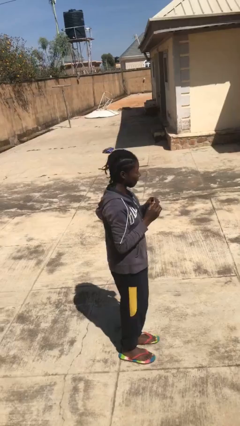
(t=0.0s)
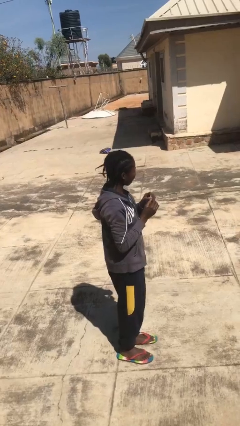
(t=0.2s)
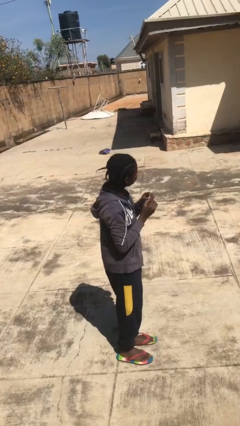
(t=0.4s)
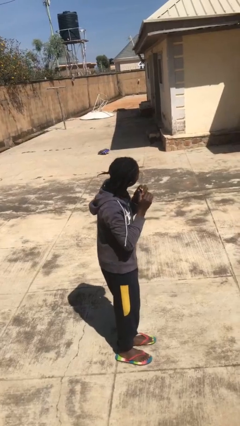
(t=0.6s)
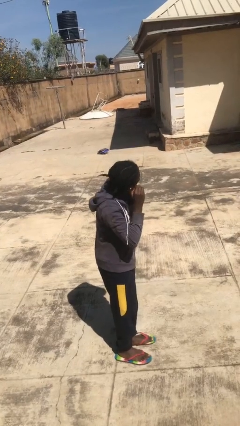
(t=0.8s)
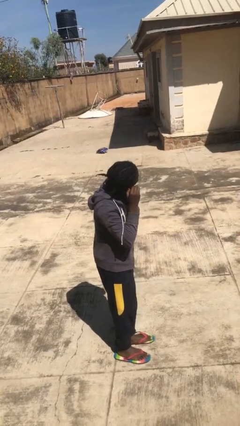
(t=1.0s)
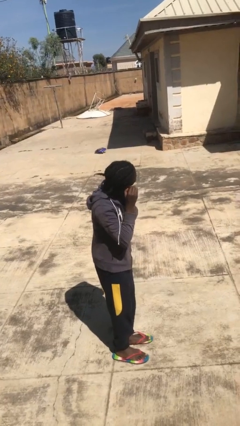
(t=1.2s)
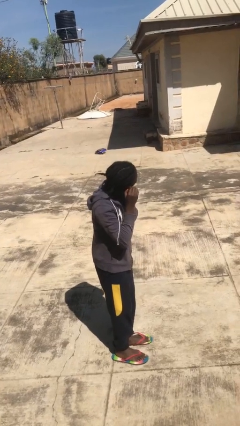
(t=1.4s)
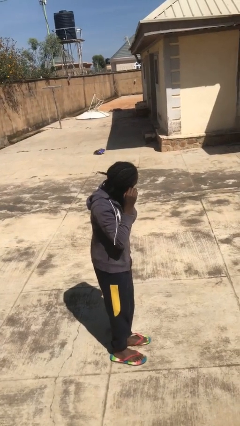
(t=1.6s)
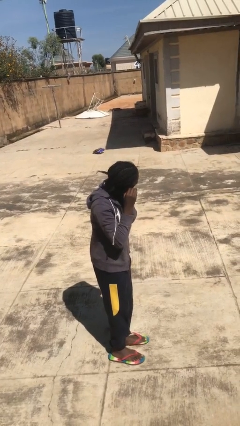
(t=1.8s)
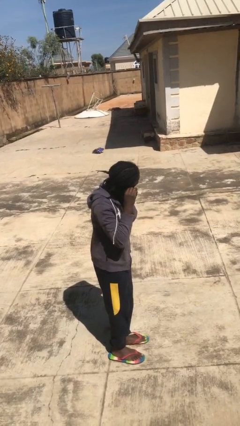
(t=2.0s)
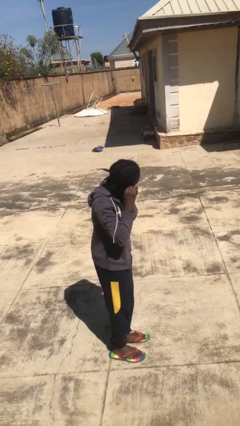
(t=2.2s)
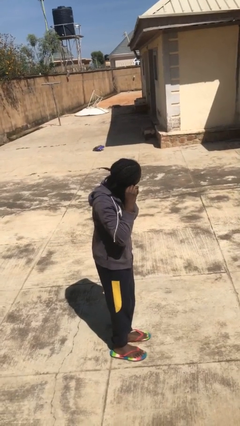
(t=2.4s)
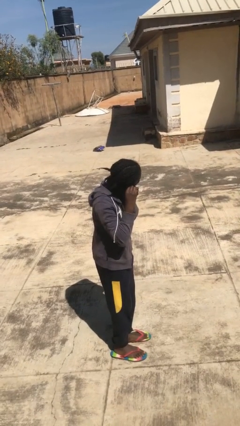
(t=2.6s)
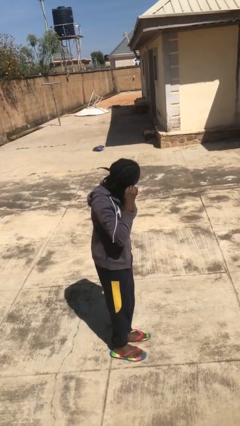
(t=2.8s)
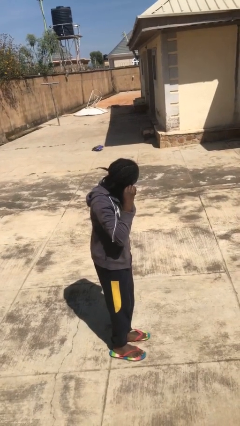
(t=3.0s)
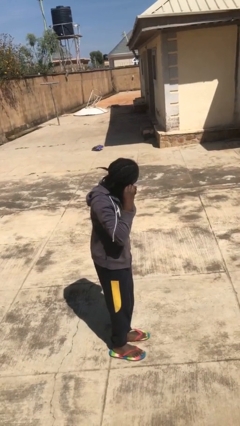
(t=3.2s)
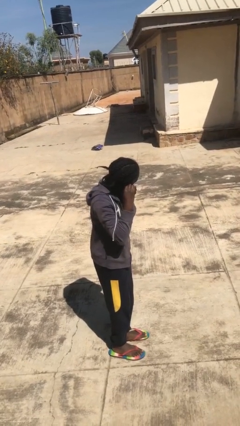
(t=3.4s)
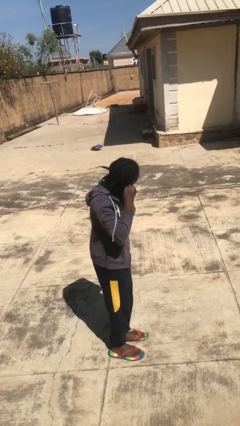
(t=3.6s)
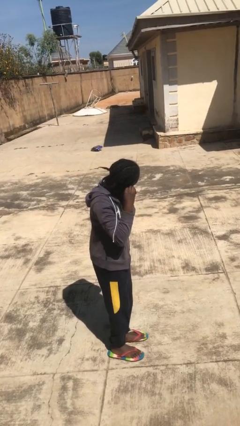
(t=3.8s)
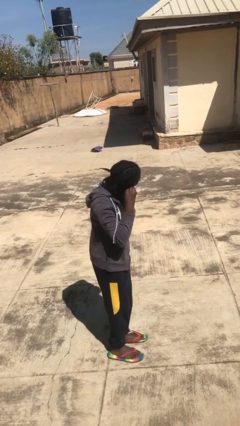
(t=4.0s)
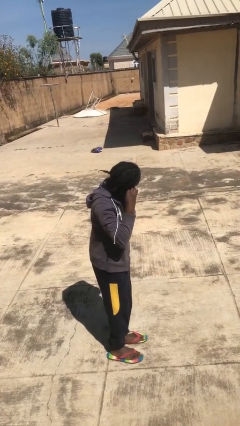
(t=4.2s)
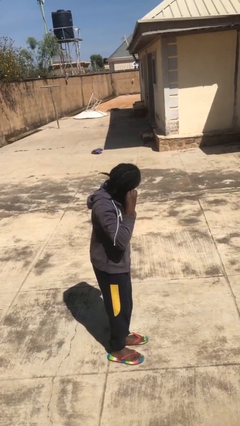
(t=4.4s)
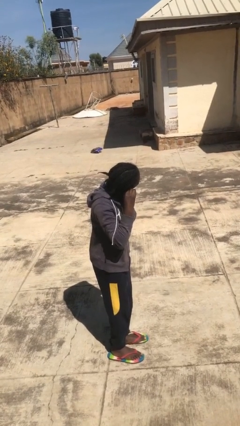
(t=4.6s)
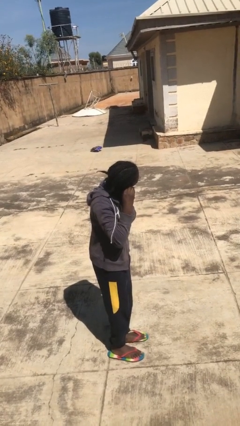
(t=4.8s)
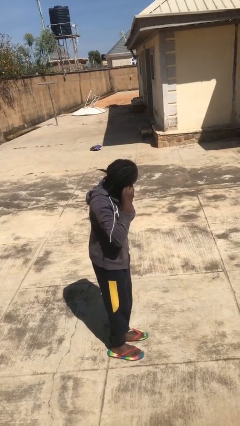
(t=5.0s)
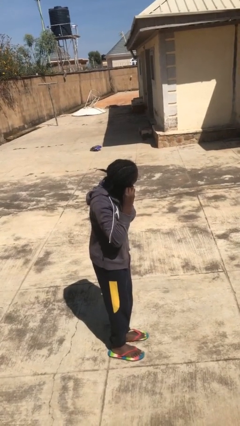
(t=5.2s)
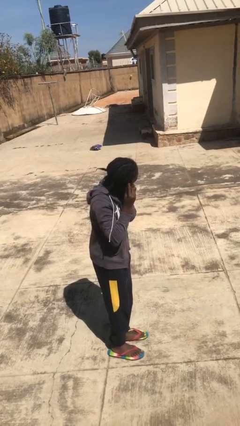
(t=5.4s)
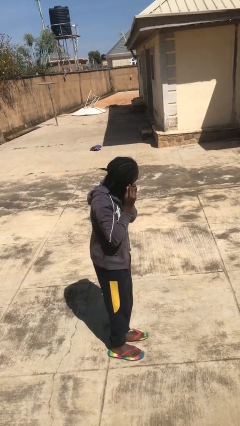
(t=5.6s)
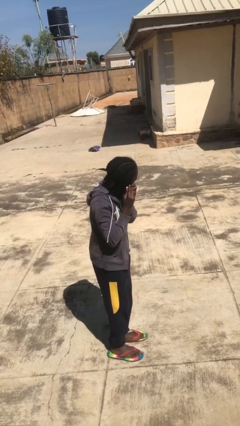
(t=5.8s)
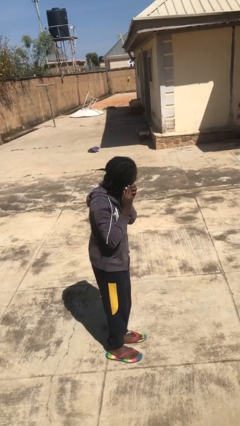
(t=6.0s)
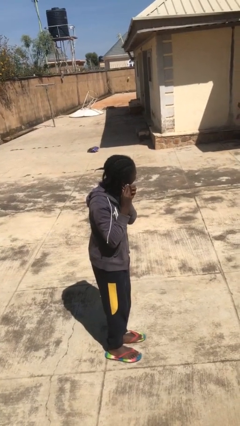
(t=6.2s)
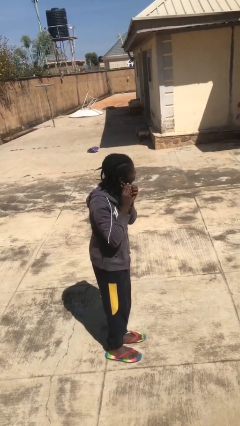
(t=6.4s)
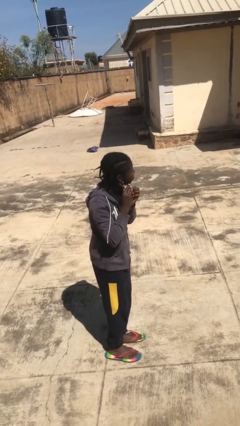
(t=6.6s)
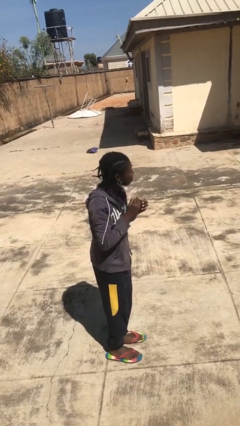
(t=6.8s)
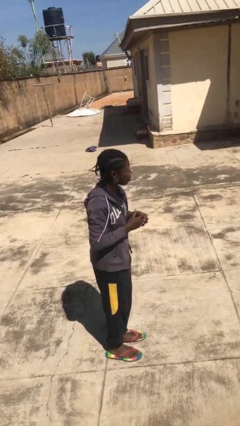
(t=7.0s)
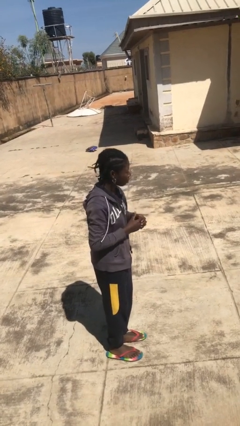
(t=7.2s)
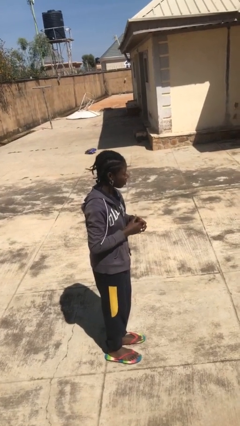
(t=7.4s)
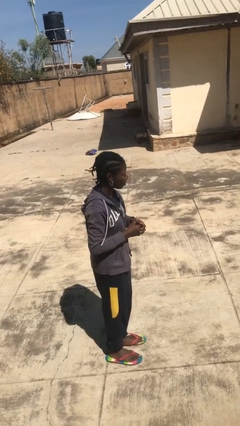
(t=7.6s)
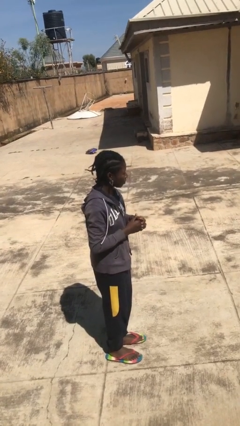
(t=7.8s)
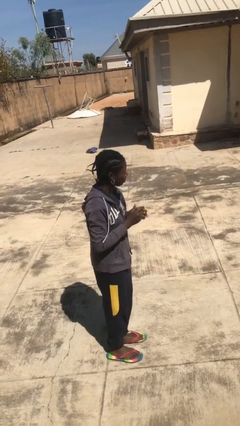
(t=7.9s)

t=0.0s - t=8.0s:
person puts on earrings

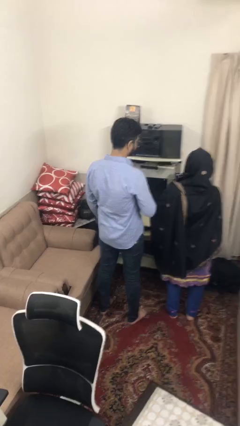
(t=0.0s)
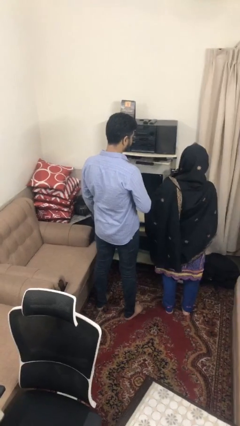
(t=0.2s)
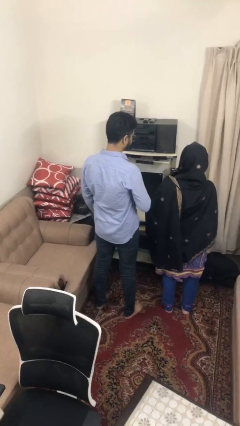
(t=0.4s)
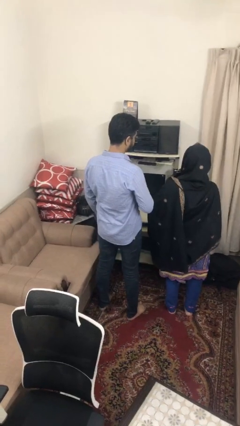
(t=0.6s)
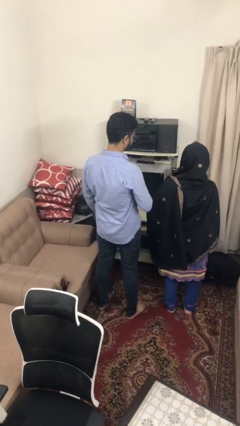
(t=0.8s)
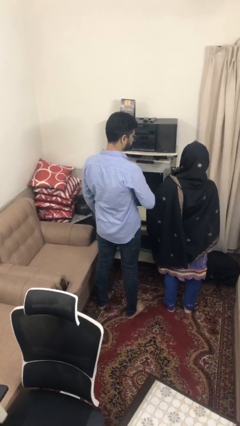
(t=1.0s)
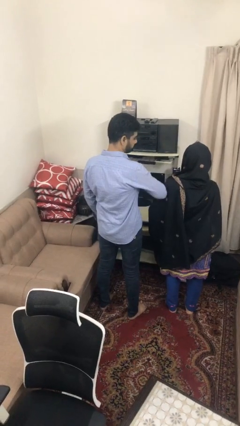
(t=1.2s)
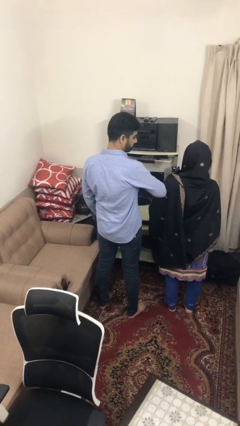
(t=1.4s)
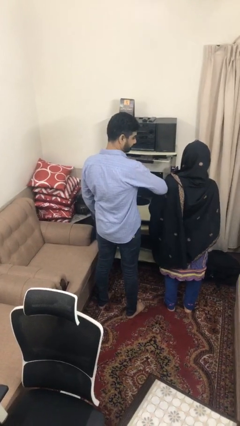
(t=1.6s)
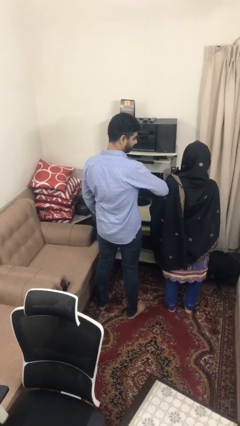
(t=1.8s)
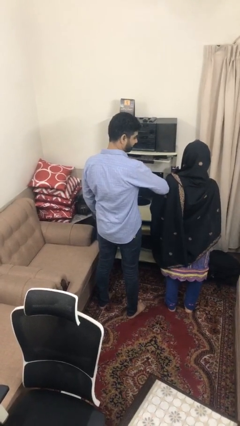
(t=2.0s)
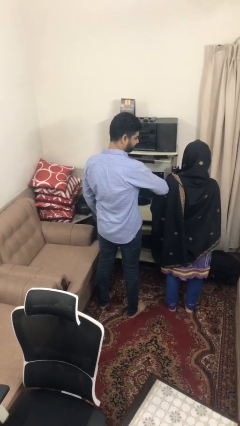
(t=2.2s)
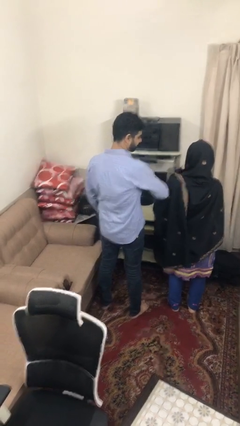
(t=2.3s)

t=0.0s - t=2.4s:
person nudges person with elbow

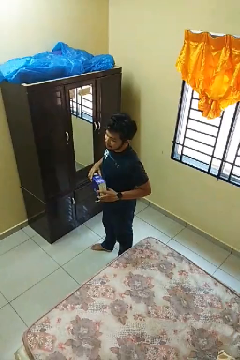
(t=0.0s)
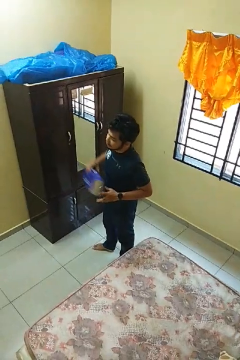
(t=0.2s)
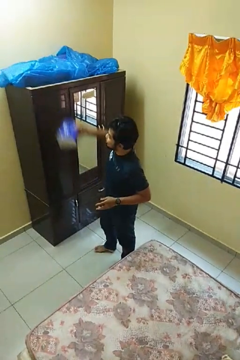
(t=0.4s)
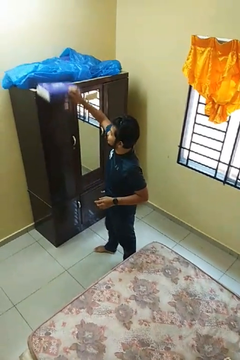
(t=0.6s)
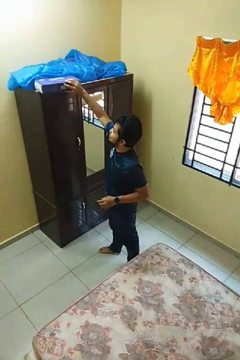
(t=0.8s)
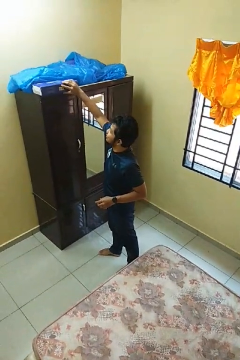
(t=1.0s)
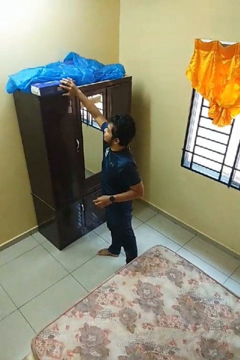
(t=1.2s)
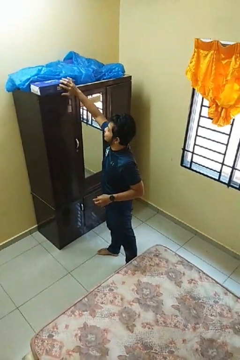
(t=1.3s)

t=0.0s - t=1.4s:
person puts down object on countertop

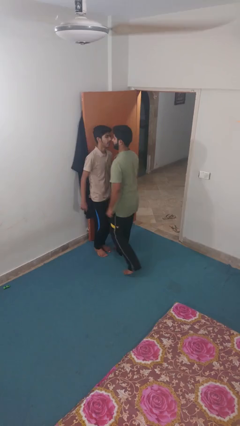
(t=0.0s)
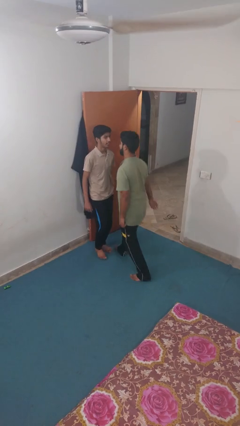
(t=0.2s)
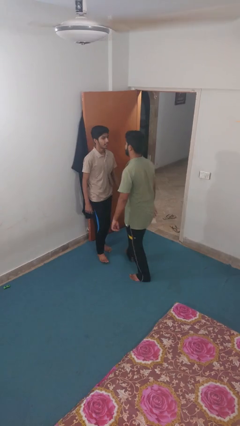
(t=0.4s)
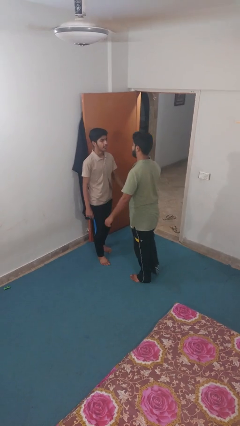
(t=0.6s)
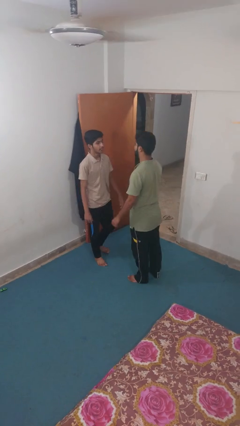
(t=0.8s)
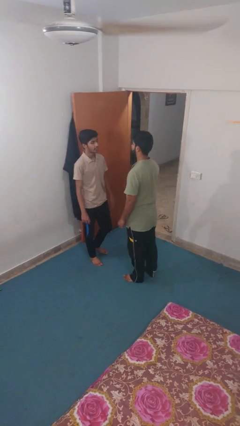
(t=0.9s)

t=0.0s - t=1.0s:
person puts down person

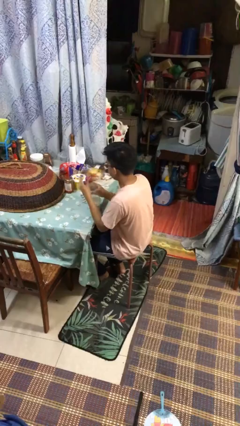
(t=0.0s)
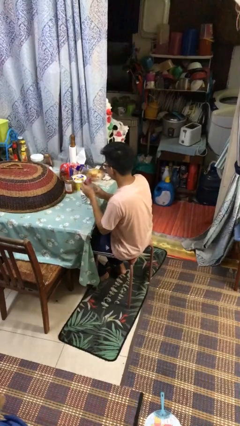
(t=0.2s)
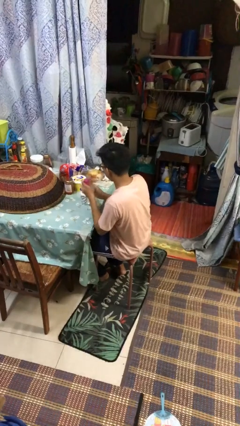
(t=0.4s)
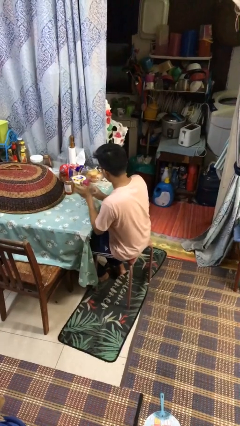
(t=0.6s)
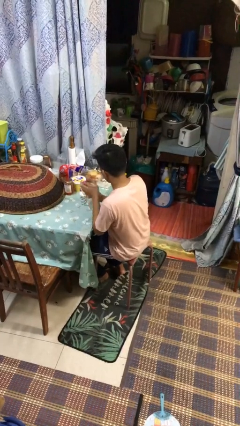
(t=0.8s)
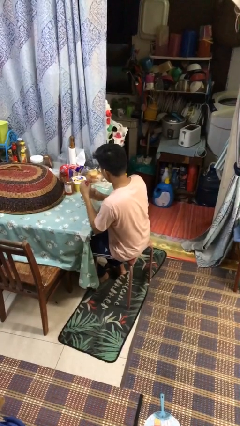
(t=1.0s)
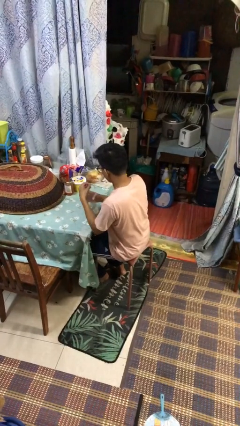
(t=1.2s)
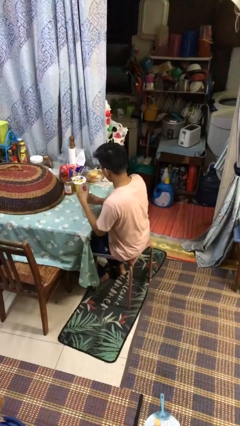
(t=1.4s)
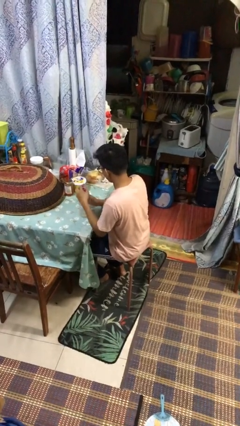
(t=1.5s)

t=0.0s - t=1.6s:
person screws lid to bottle

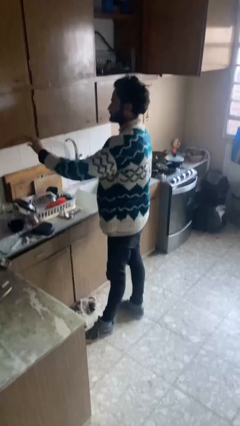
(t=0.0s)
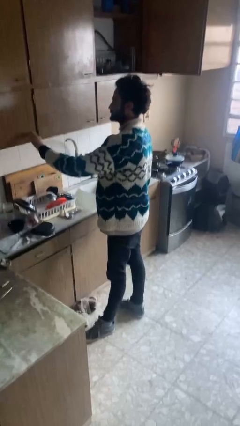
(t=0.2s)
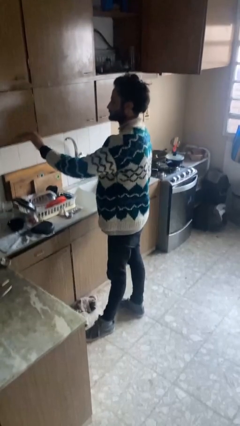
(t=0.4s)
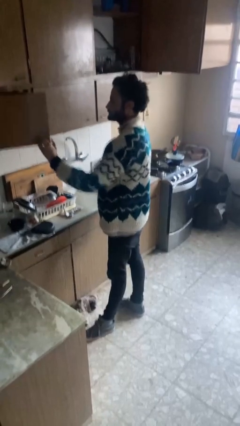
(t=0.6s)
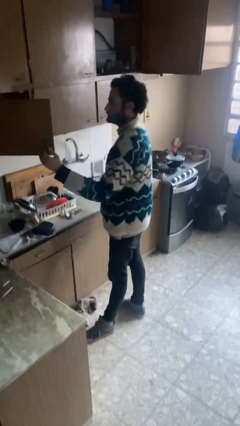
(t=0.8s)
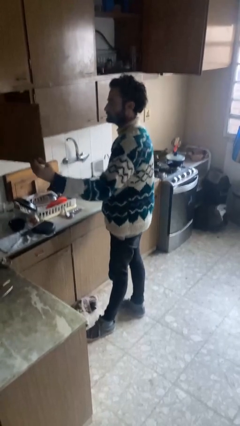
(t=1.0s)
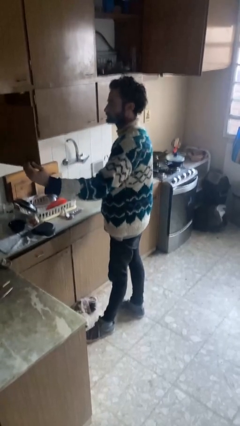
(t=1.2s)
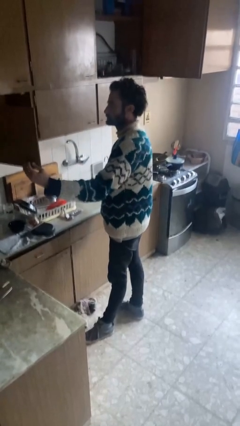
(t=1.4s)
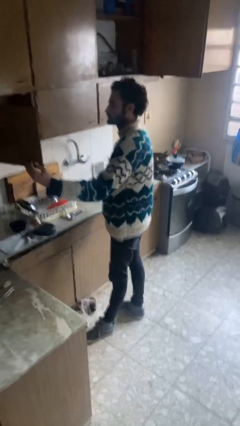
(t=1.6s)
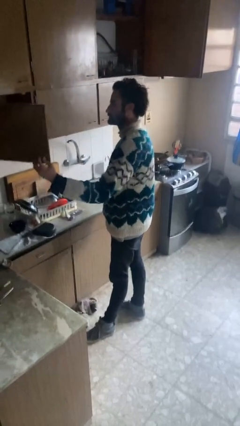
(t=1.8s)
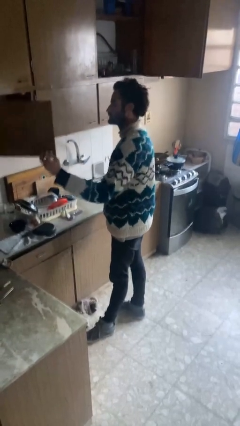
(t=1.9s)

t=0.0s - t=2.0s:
person opens cabinet

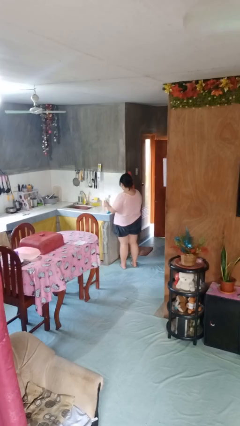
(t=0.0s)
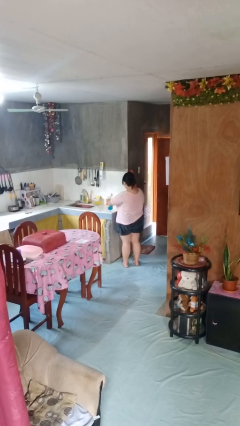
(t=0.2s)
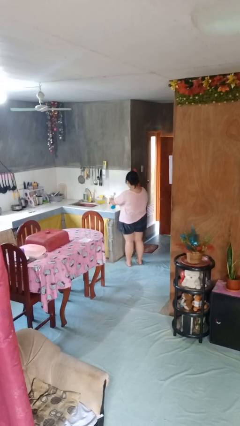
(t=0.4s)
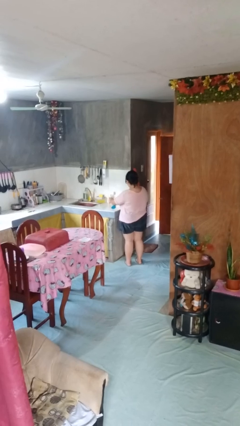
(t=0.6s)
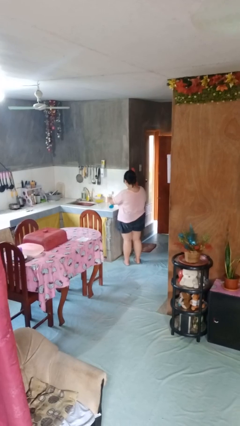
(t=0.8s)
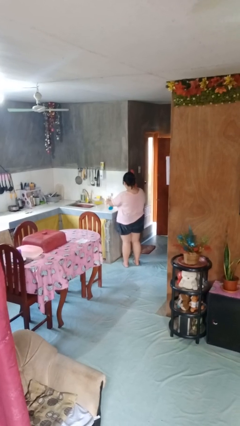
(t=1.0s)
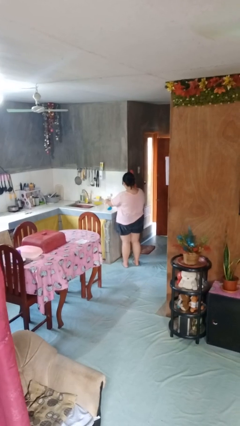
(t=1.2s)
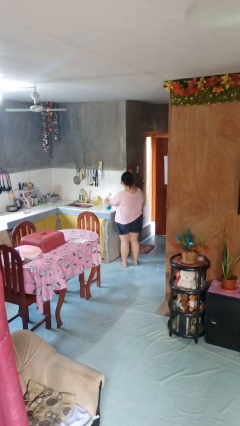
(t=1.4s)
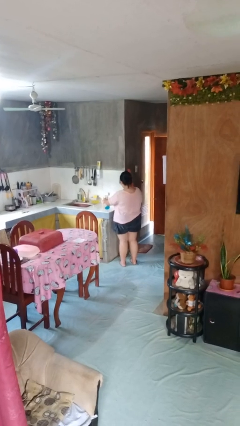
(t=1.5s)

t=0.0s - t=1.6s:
person sprays from bottle
